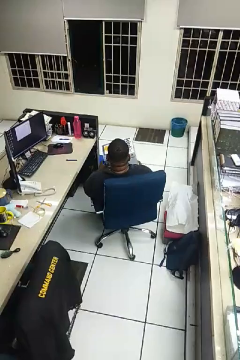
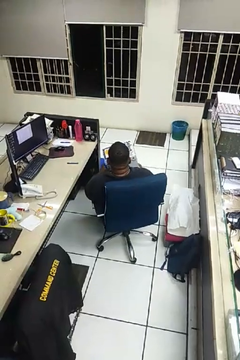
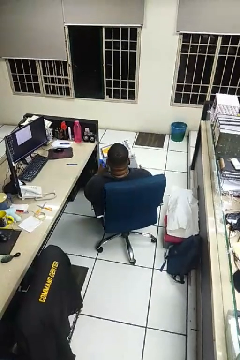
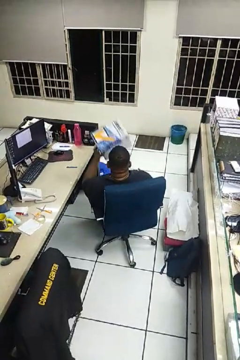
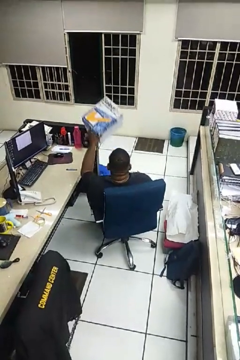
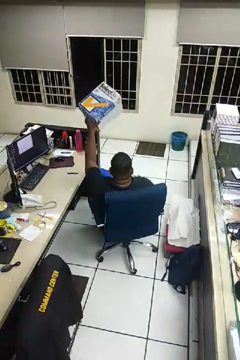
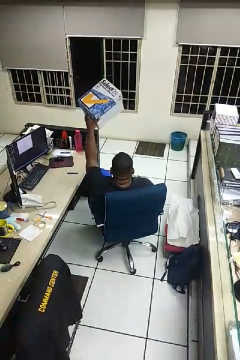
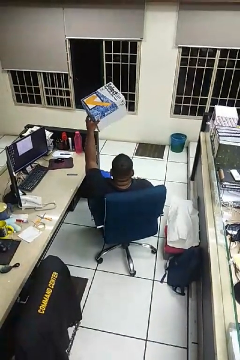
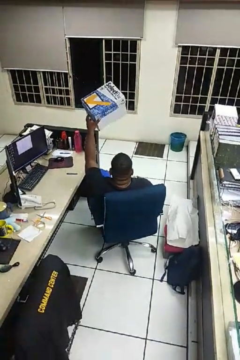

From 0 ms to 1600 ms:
person holds object above head

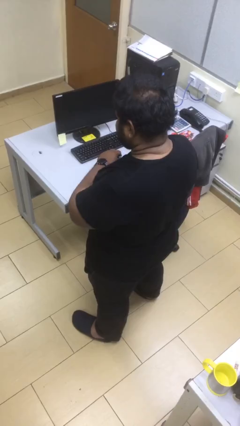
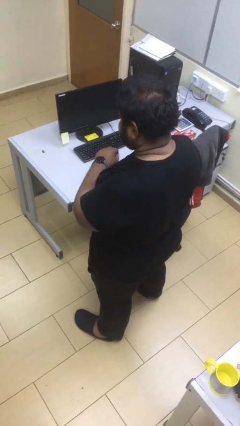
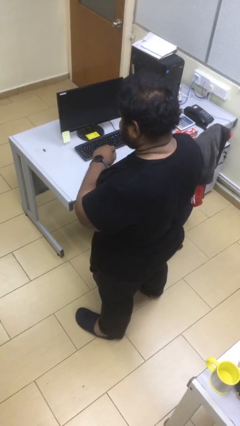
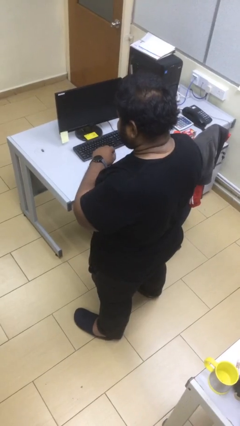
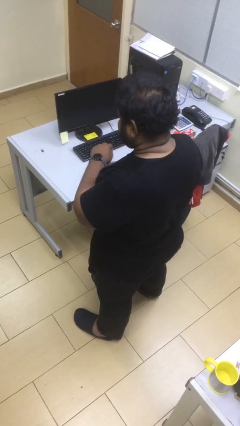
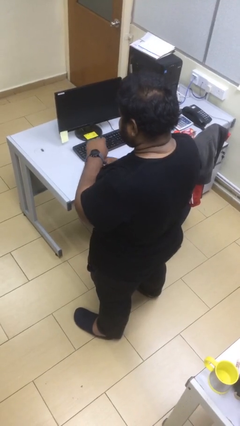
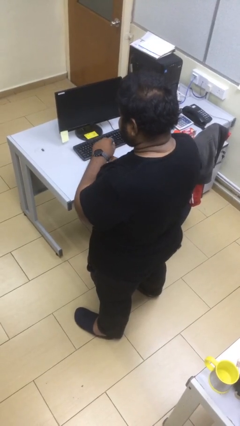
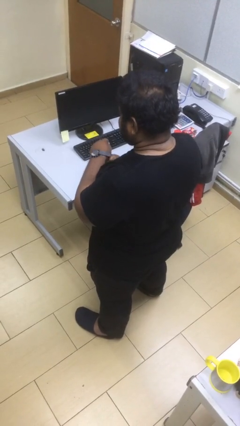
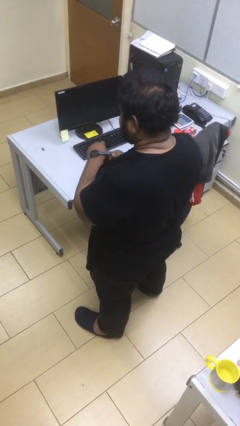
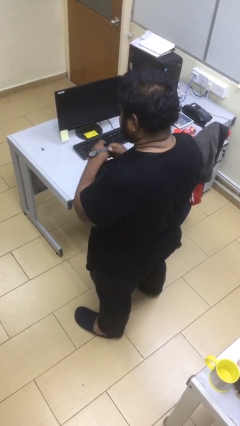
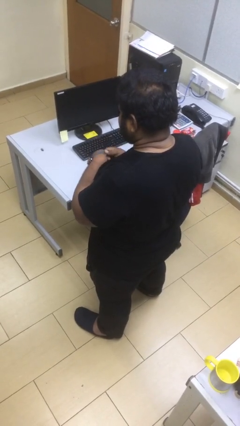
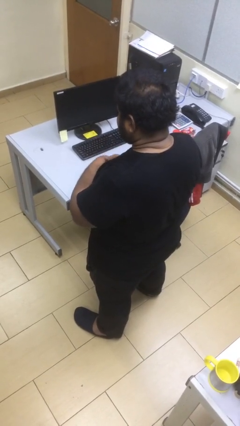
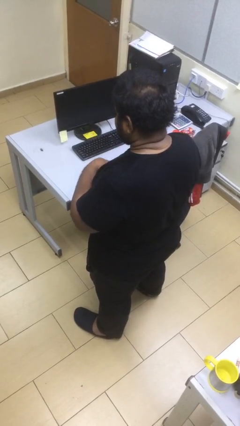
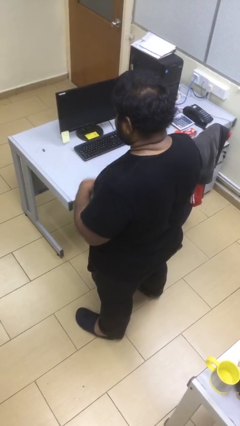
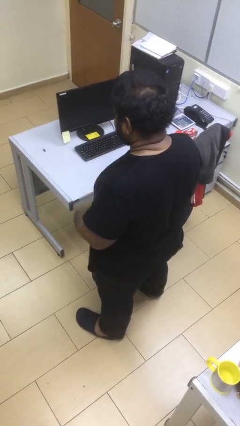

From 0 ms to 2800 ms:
person takes off wristwatch

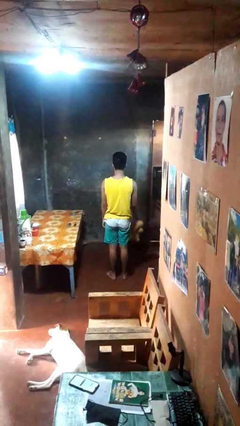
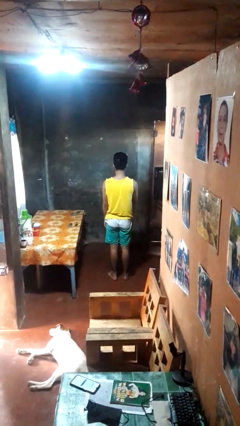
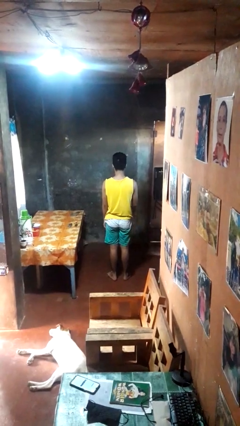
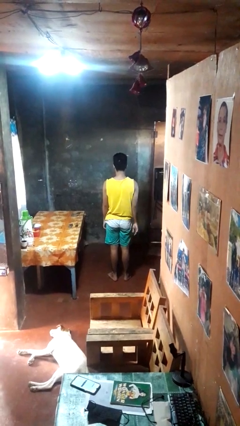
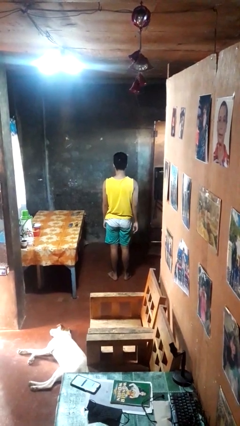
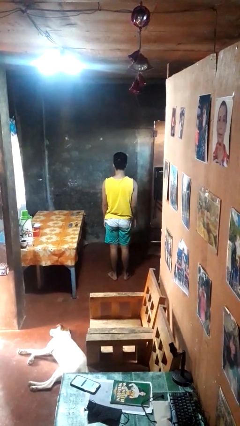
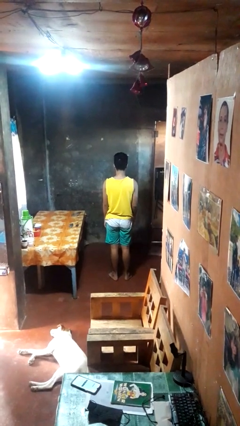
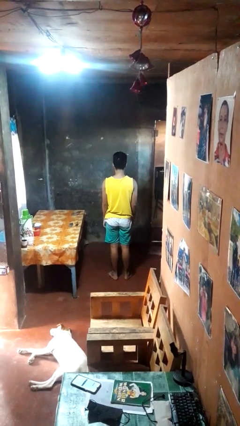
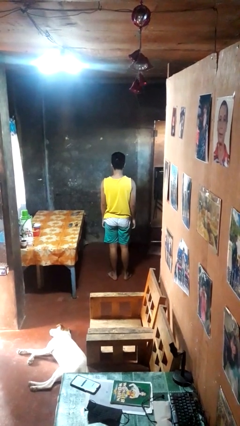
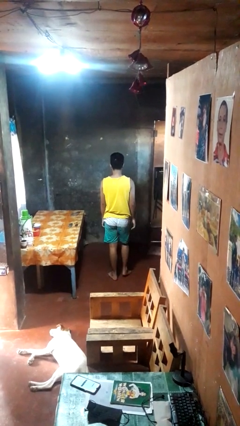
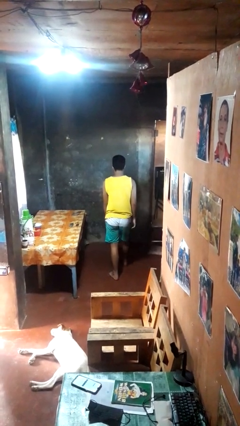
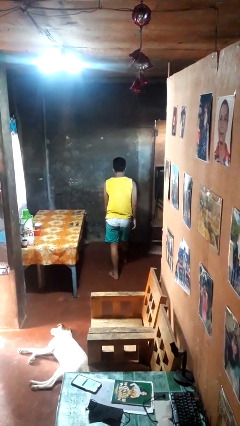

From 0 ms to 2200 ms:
person throws object to ground

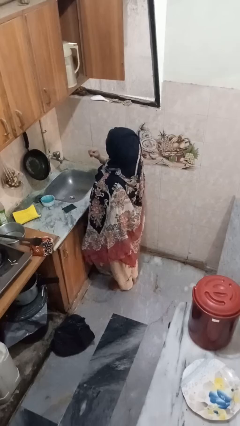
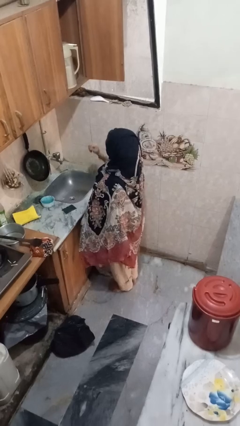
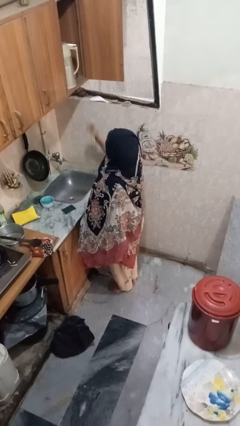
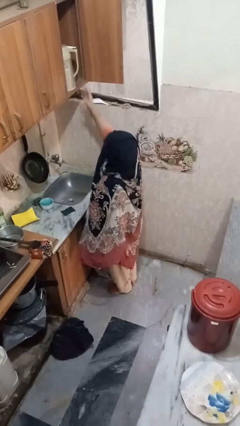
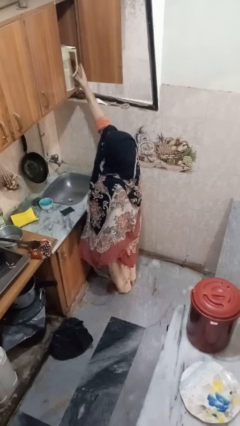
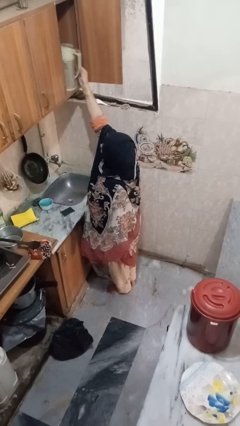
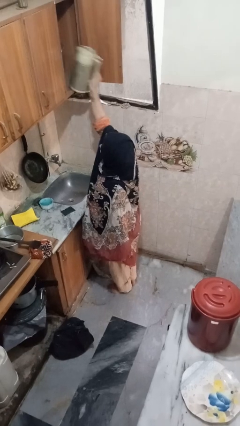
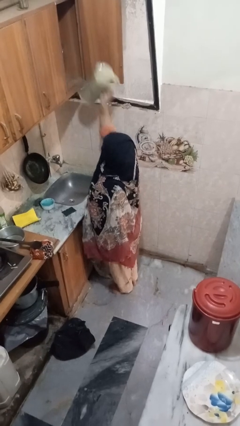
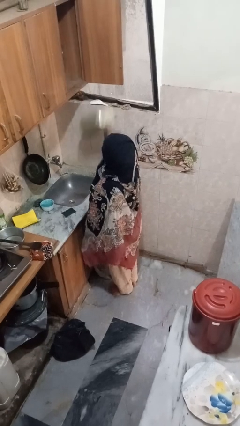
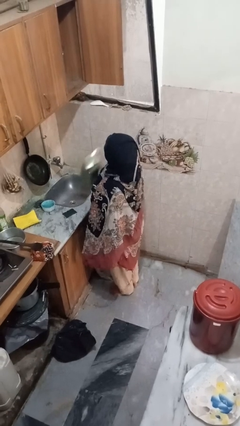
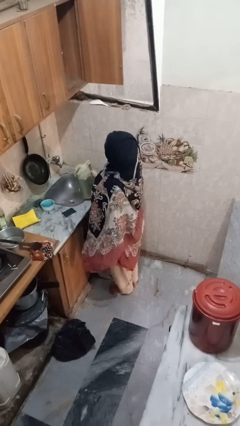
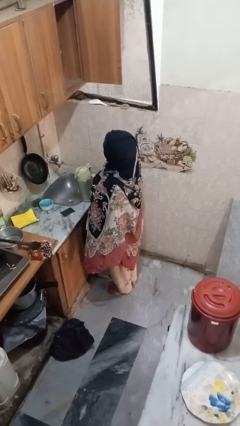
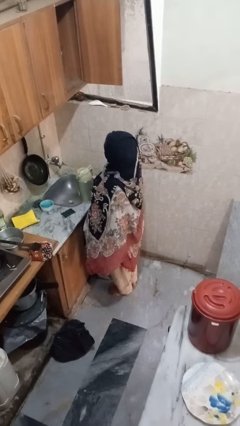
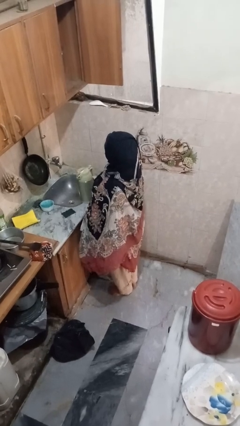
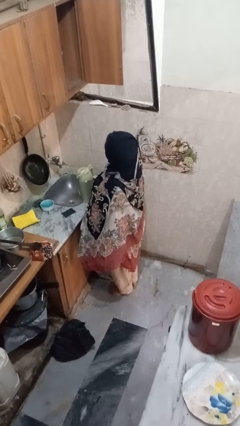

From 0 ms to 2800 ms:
person puts object in cabinet

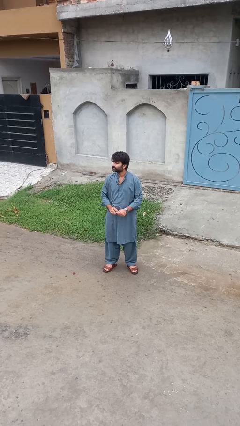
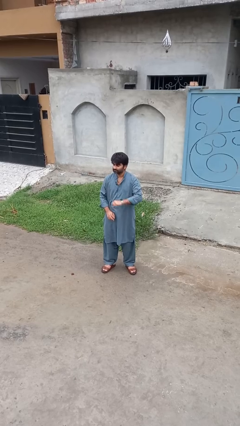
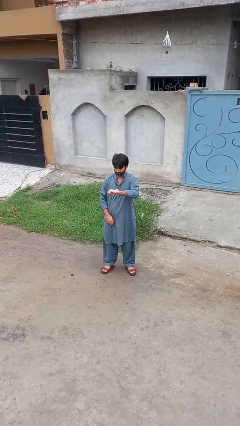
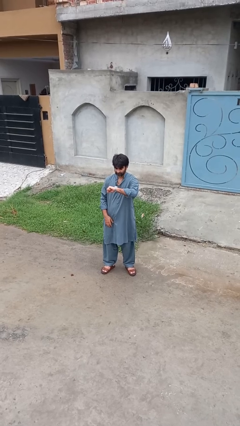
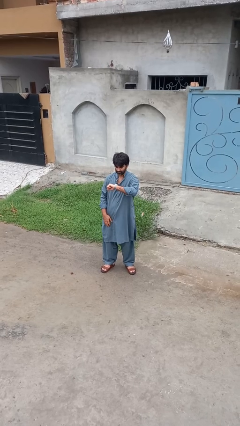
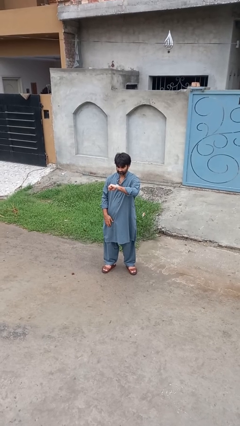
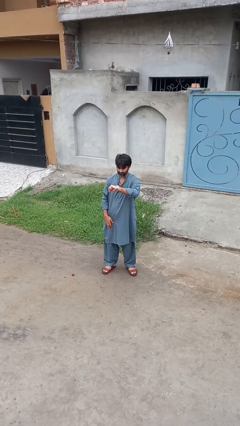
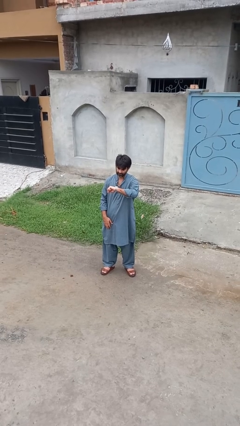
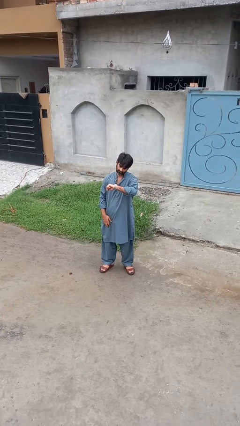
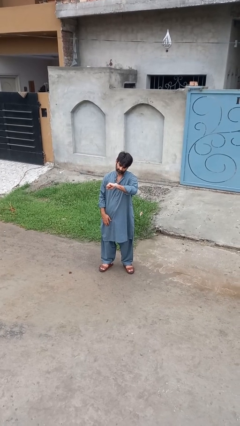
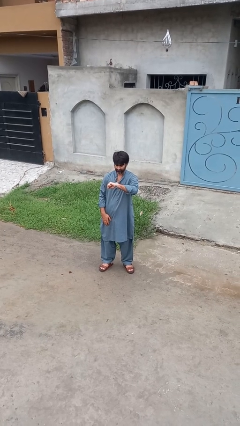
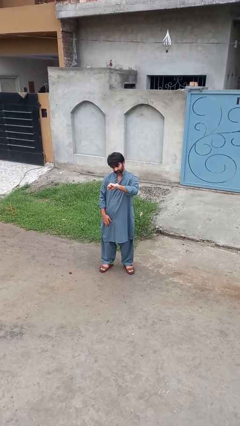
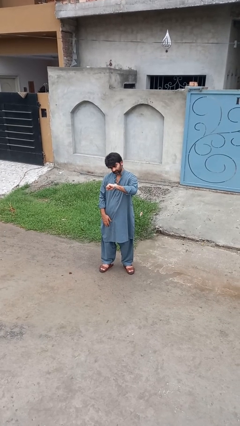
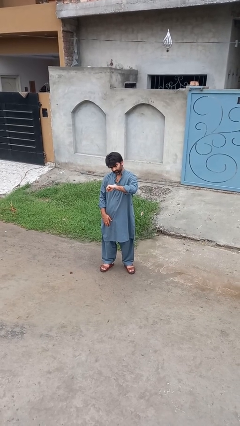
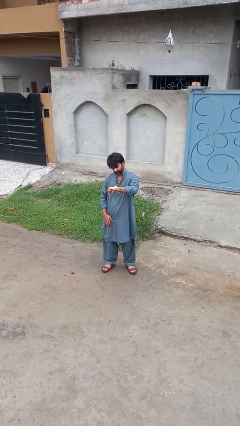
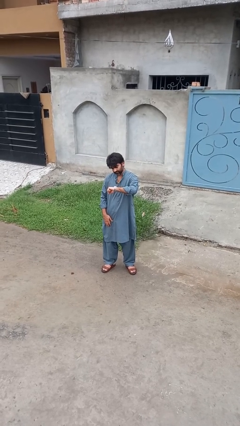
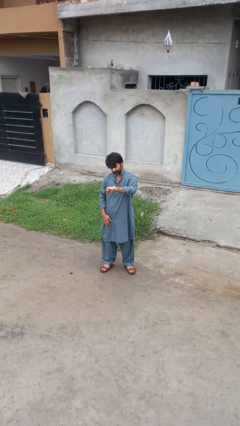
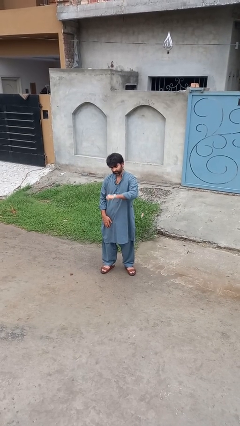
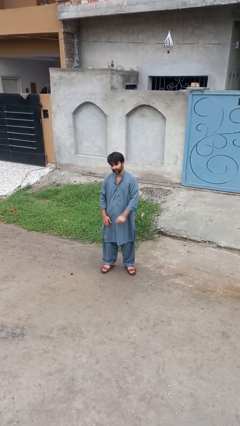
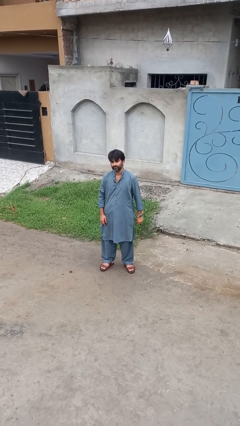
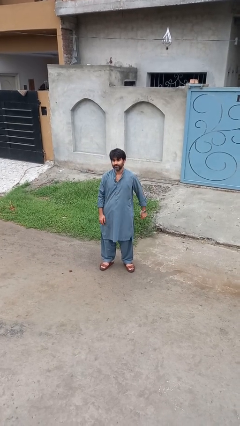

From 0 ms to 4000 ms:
person looks at wristwatch

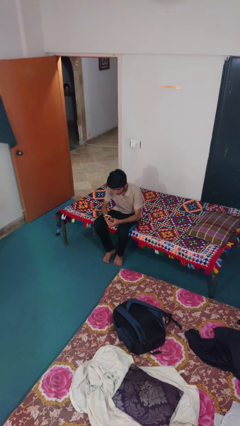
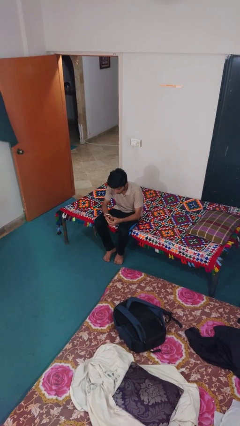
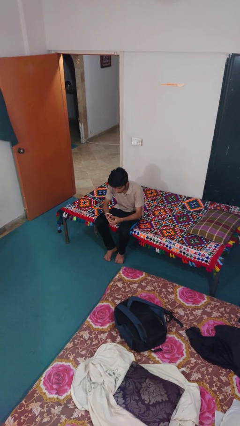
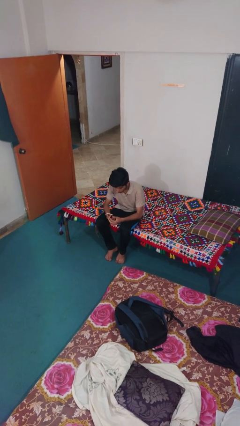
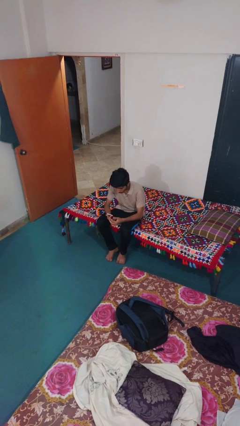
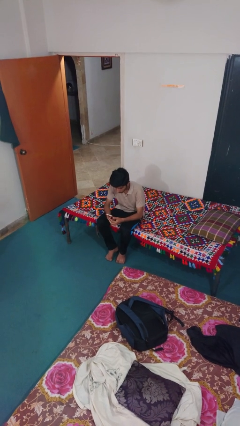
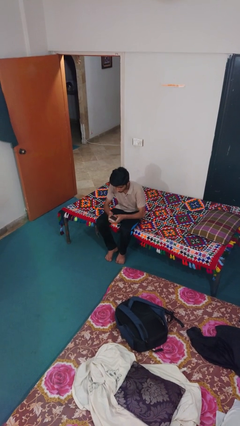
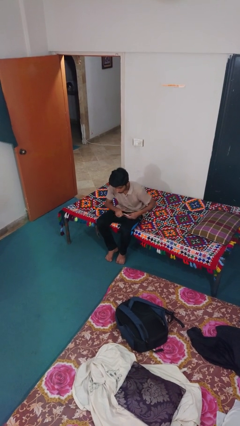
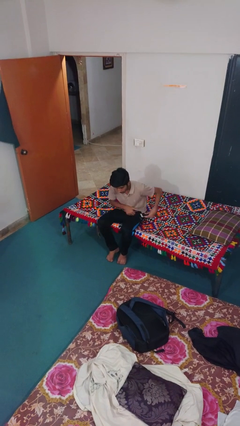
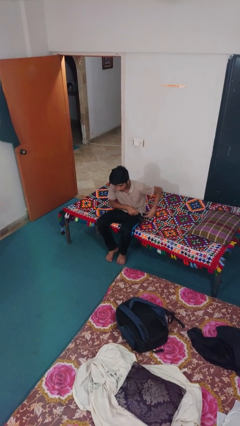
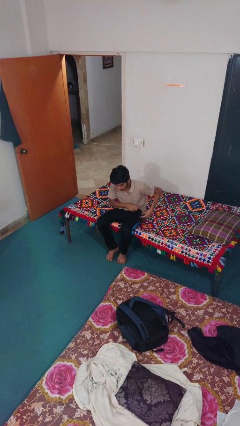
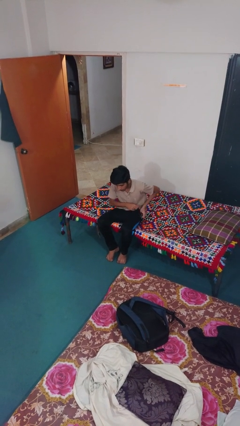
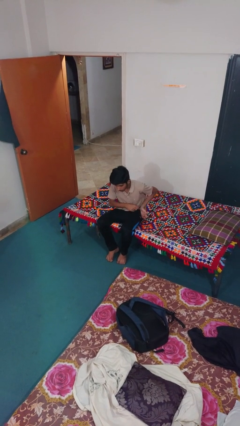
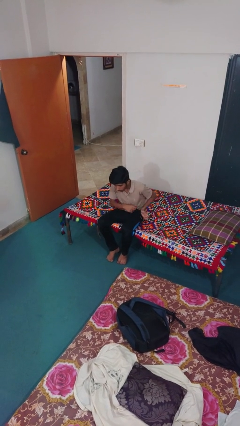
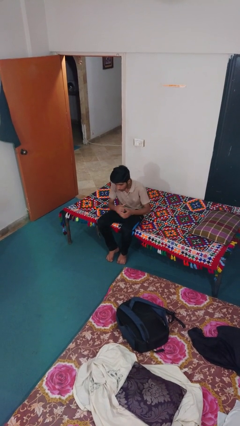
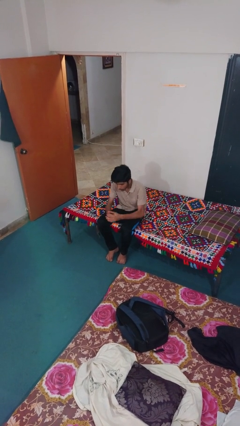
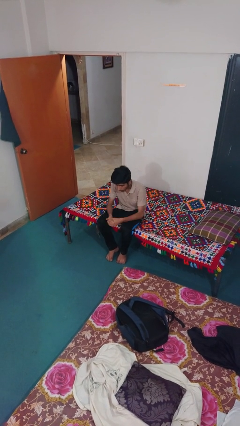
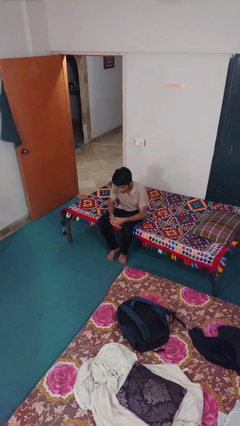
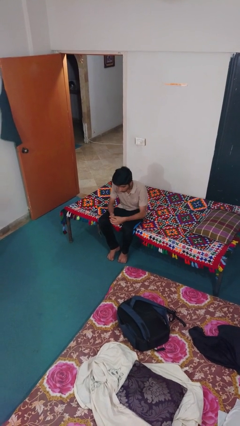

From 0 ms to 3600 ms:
person puts phone into pocket

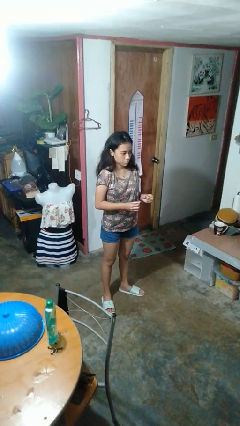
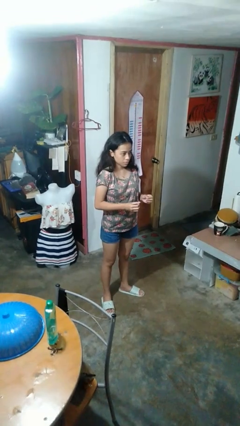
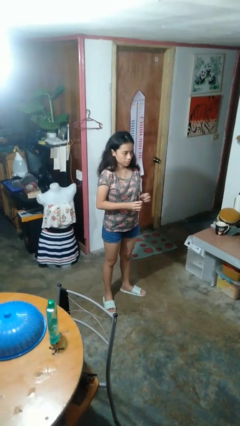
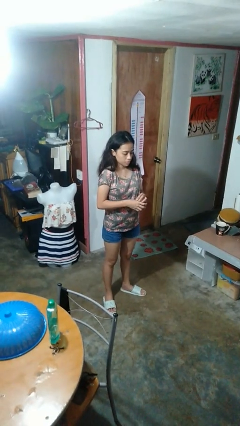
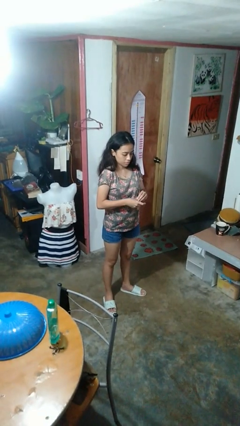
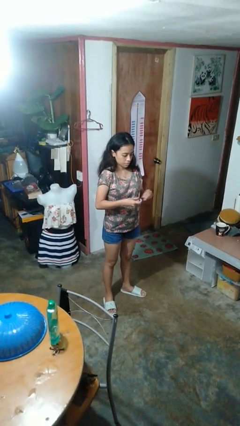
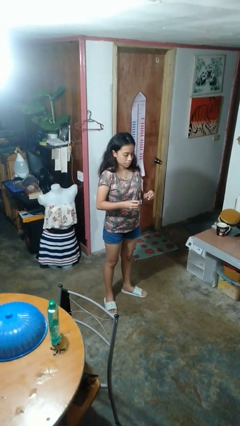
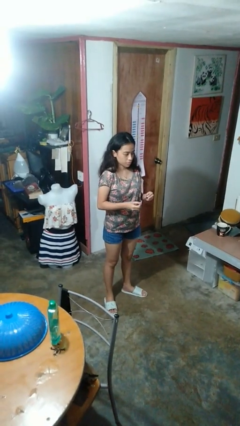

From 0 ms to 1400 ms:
person takes off ring
